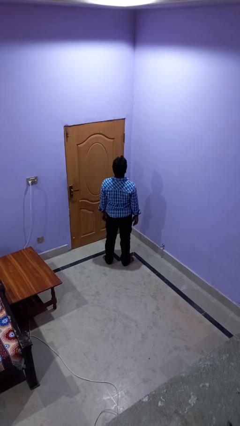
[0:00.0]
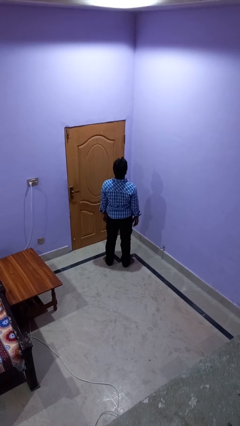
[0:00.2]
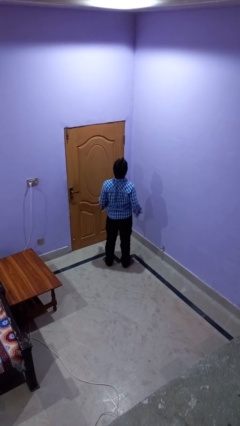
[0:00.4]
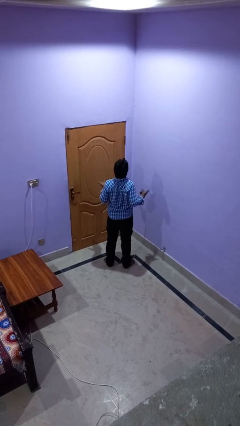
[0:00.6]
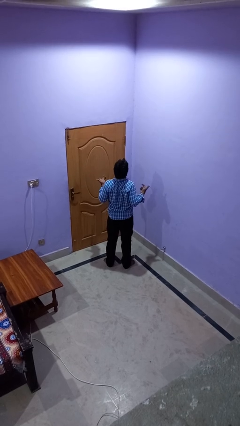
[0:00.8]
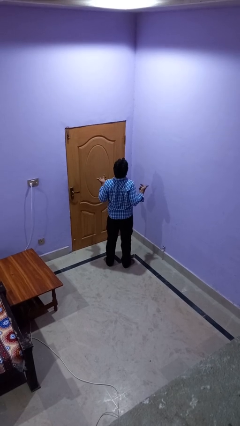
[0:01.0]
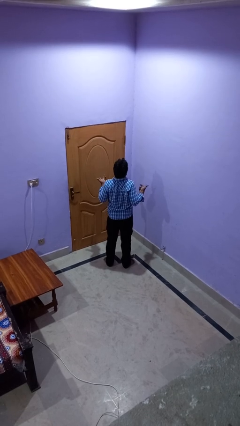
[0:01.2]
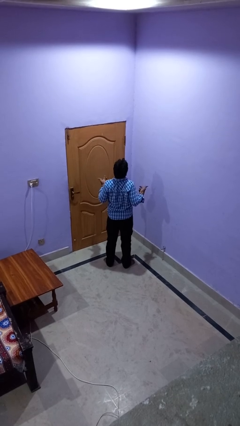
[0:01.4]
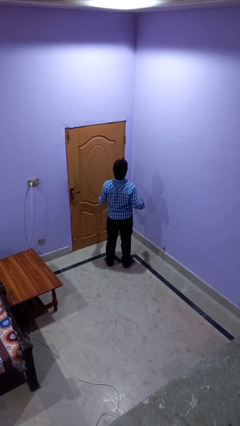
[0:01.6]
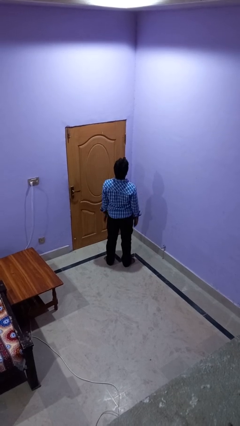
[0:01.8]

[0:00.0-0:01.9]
person shrugs

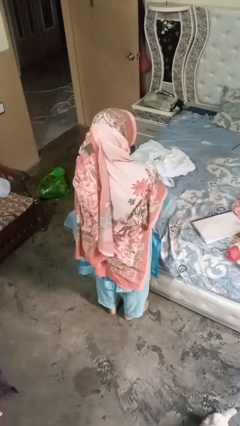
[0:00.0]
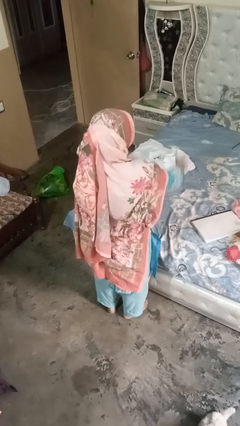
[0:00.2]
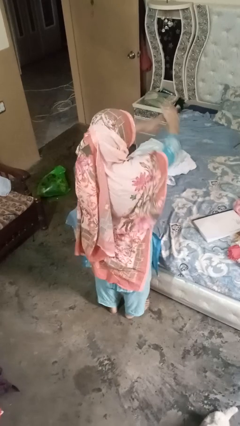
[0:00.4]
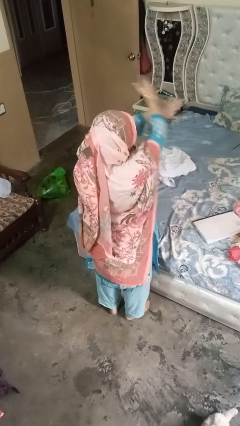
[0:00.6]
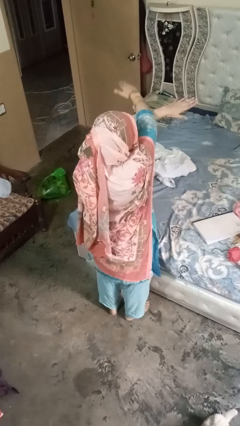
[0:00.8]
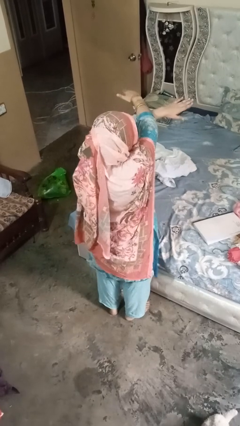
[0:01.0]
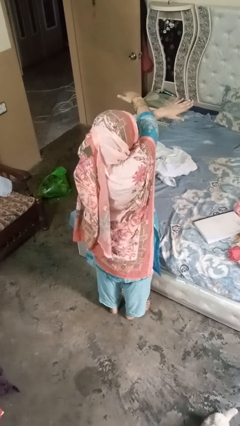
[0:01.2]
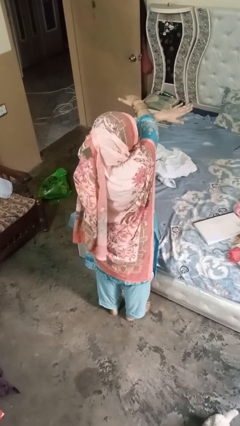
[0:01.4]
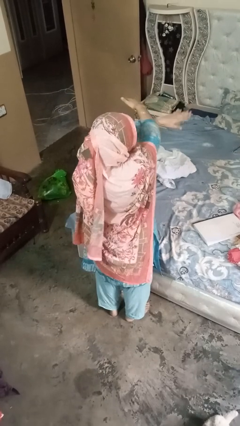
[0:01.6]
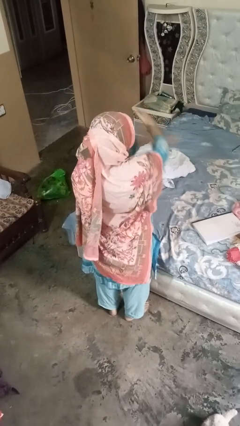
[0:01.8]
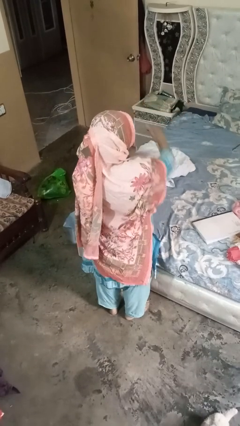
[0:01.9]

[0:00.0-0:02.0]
person gestures arms x

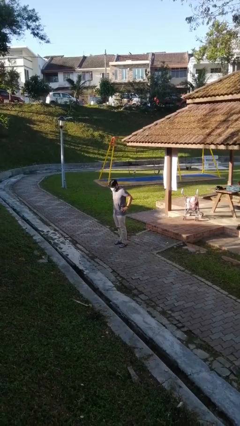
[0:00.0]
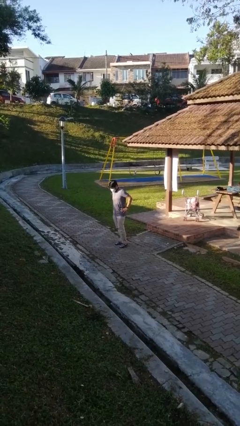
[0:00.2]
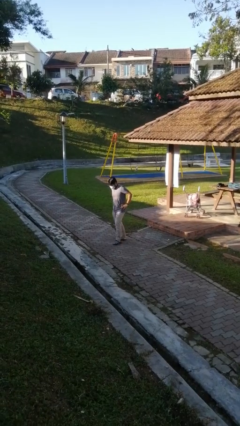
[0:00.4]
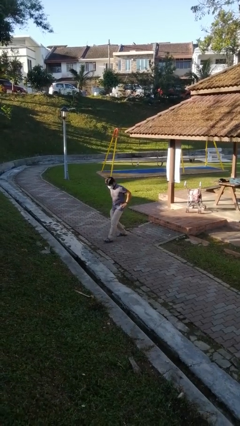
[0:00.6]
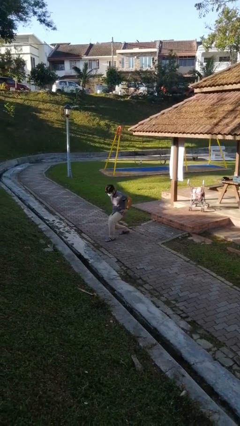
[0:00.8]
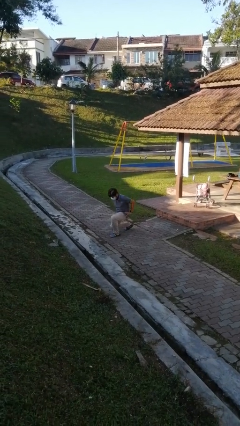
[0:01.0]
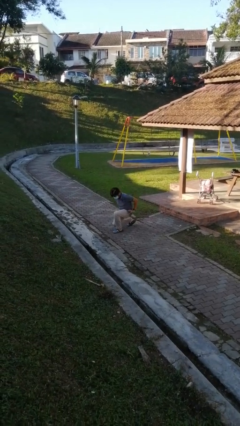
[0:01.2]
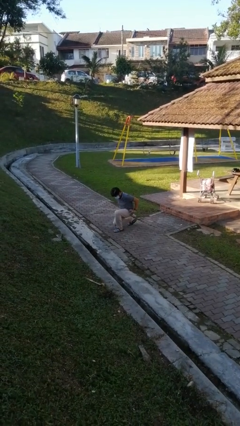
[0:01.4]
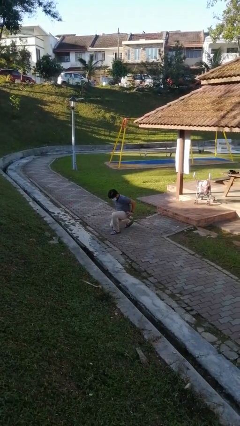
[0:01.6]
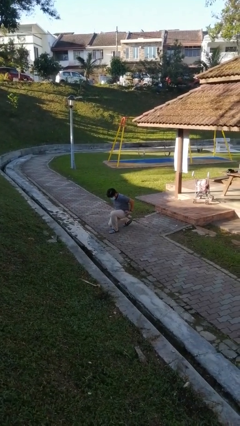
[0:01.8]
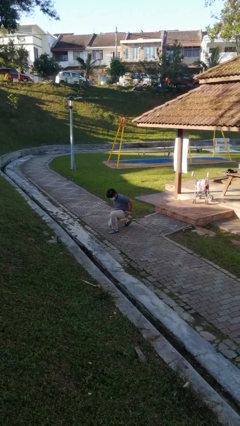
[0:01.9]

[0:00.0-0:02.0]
person kneels

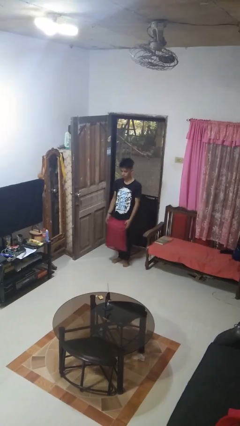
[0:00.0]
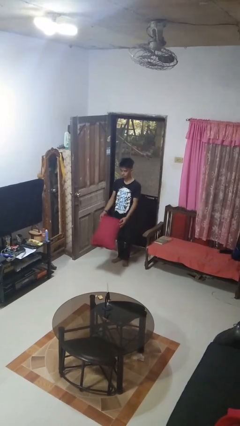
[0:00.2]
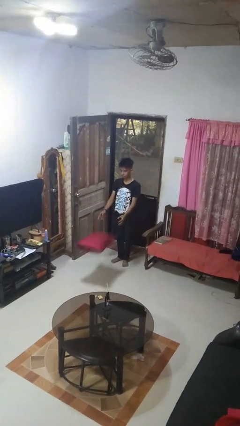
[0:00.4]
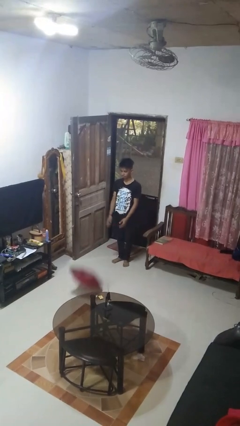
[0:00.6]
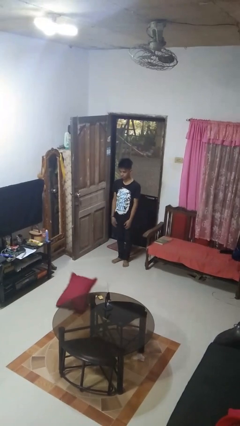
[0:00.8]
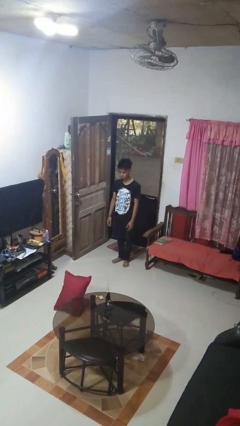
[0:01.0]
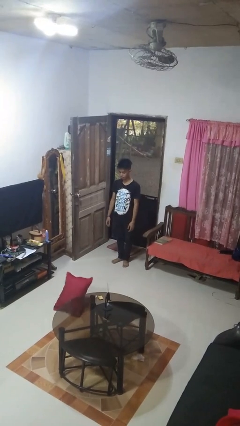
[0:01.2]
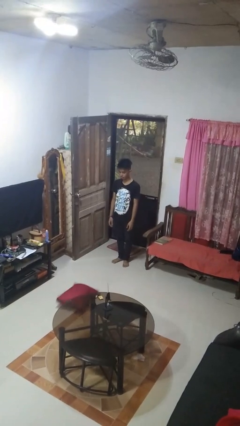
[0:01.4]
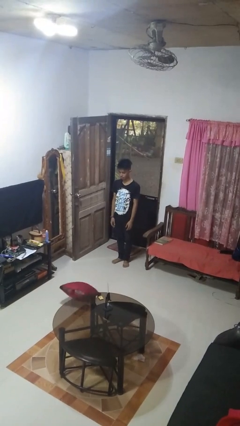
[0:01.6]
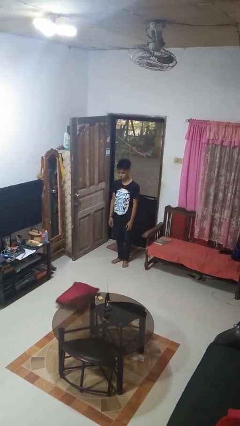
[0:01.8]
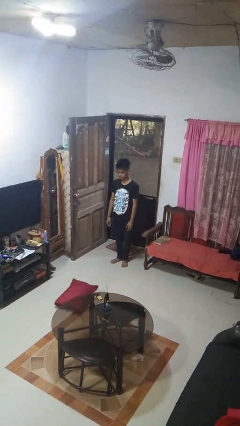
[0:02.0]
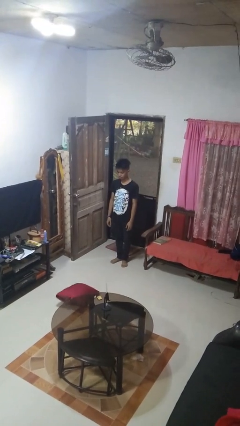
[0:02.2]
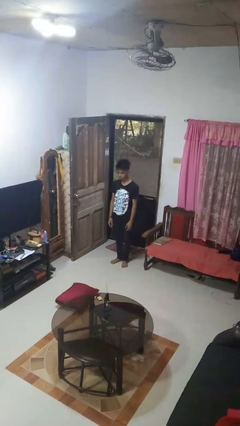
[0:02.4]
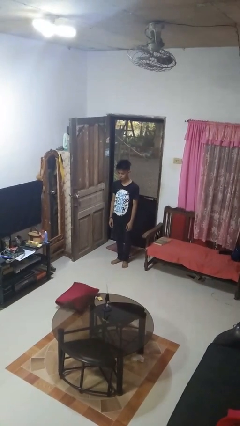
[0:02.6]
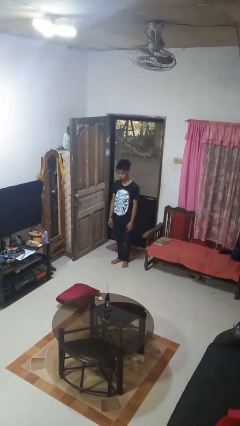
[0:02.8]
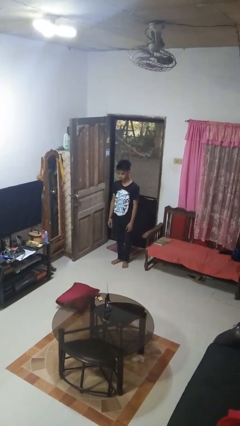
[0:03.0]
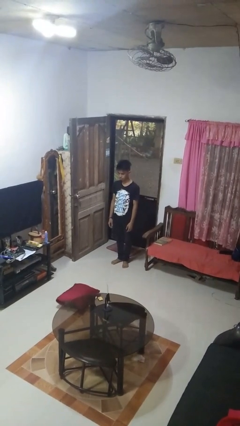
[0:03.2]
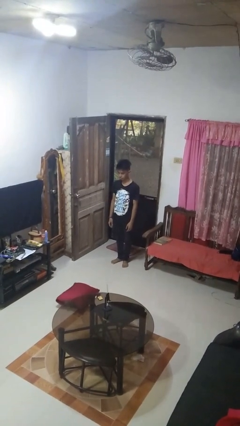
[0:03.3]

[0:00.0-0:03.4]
person throws object to ground

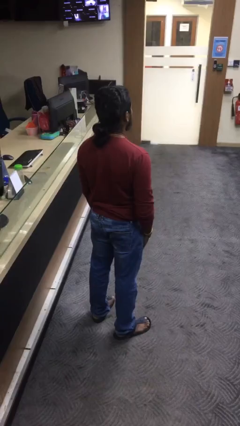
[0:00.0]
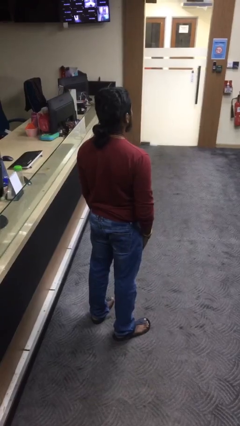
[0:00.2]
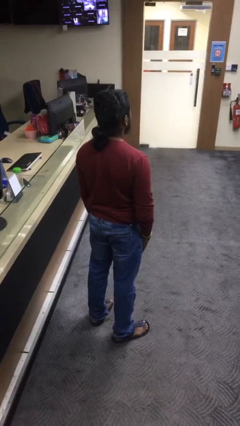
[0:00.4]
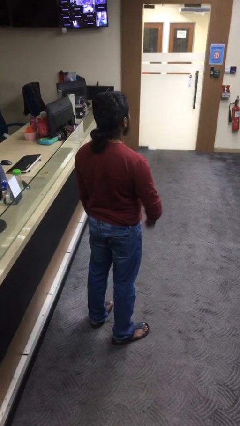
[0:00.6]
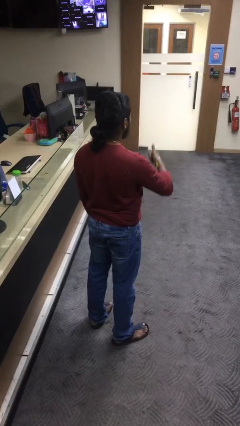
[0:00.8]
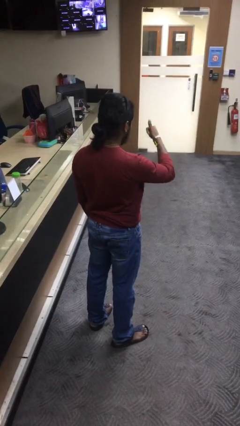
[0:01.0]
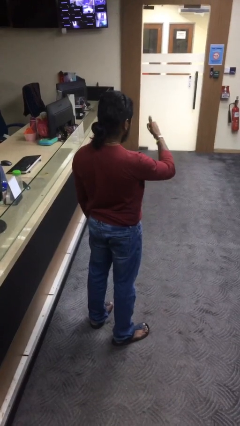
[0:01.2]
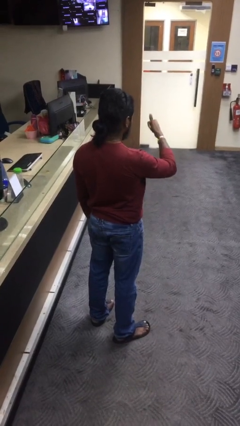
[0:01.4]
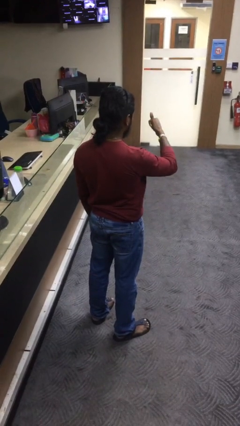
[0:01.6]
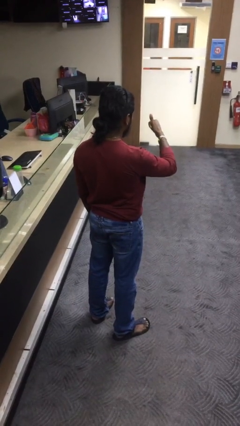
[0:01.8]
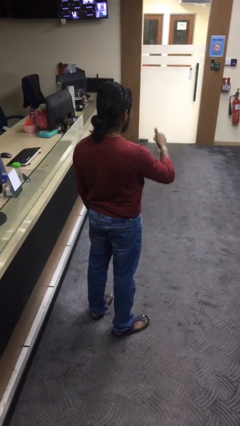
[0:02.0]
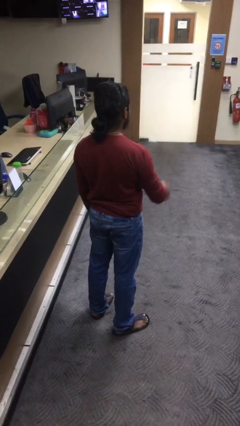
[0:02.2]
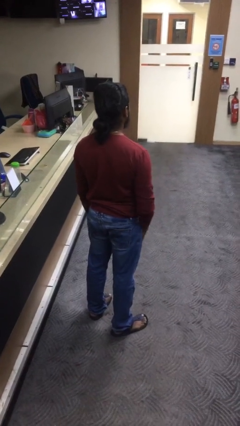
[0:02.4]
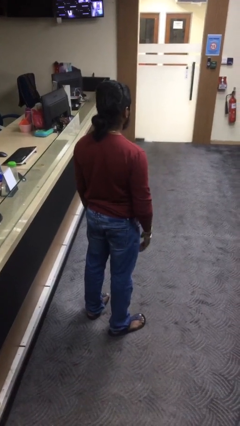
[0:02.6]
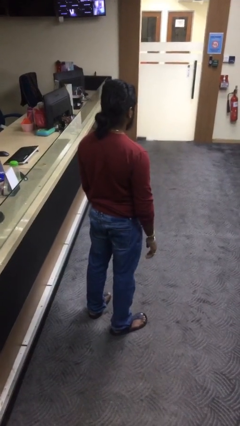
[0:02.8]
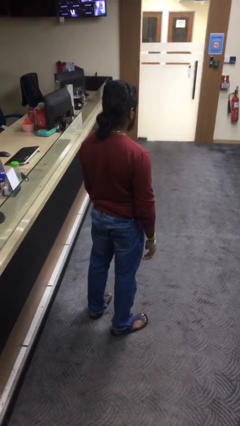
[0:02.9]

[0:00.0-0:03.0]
person gestures thumbs up

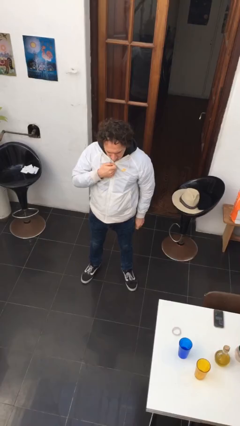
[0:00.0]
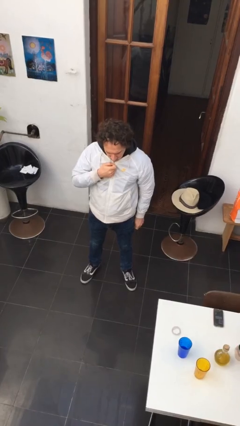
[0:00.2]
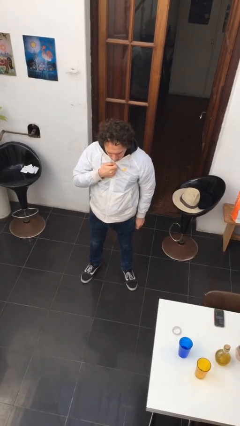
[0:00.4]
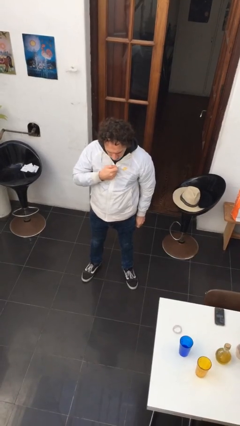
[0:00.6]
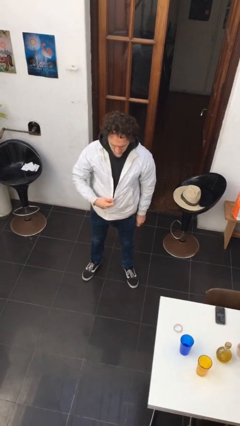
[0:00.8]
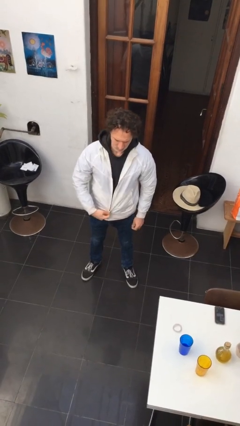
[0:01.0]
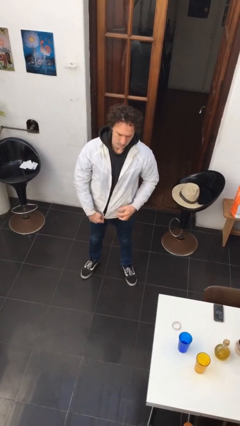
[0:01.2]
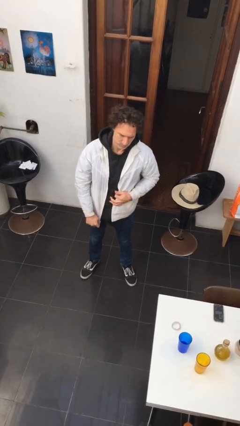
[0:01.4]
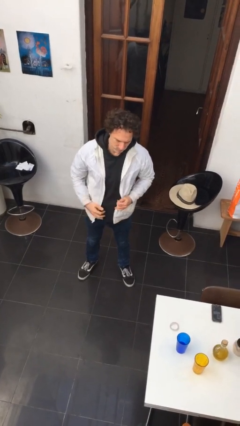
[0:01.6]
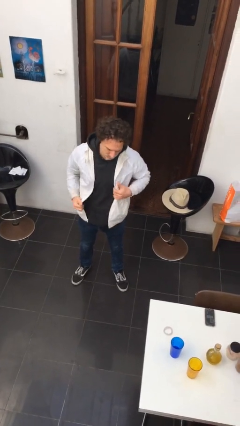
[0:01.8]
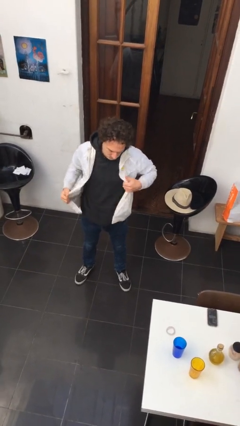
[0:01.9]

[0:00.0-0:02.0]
person unzips jacket

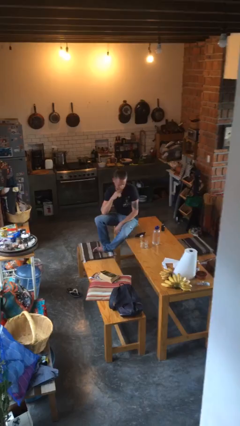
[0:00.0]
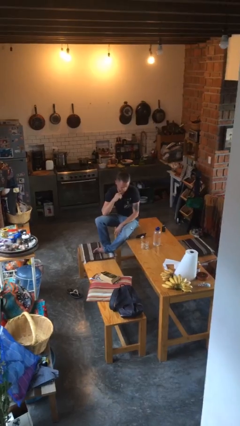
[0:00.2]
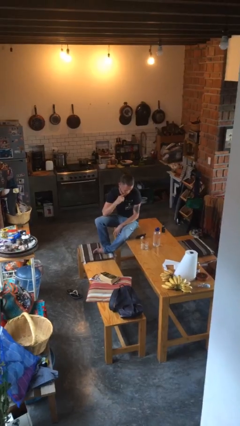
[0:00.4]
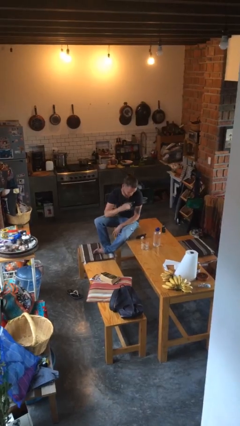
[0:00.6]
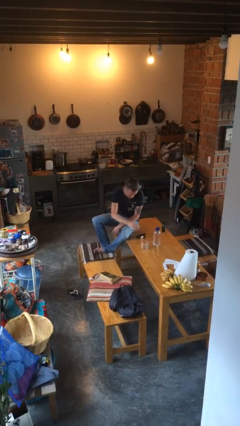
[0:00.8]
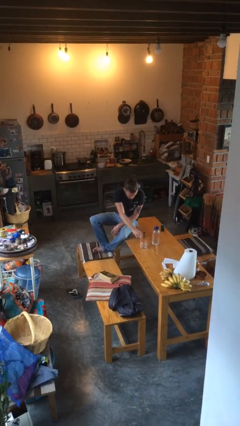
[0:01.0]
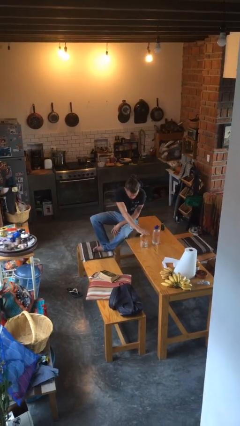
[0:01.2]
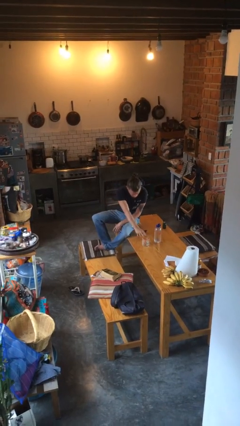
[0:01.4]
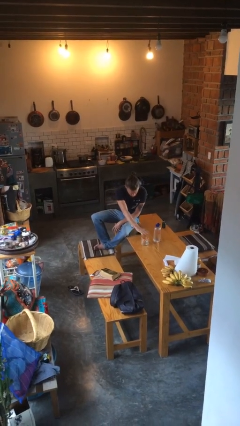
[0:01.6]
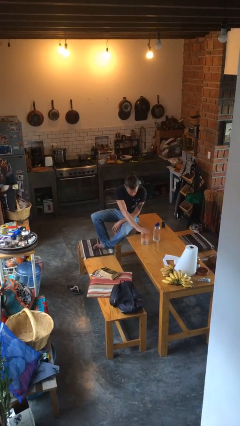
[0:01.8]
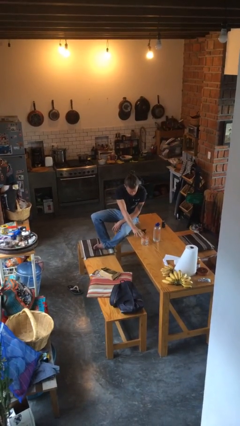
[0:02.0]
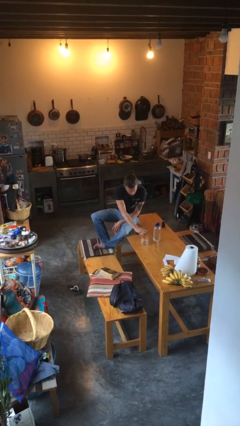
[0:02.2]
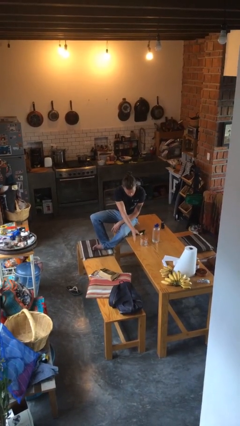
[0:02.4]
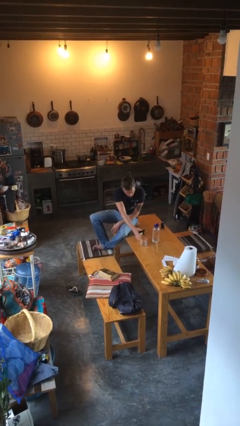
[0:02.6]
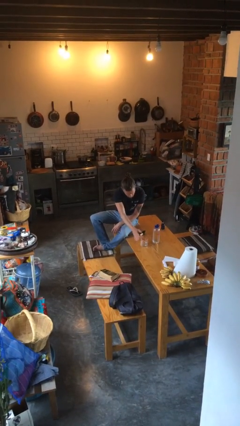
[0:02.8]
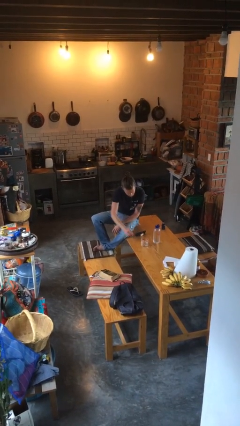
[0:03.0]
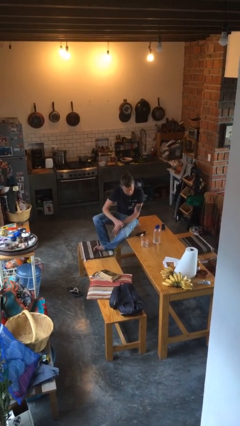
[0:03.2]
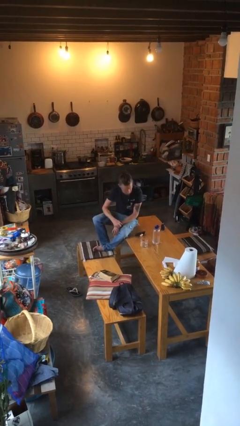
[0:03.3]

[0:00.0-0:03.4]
person waves hand over object
